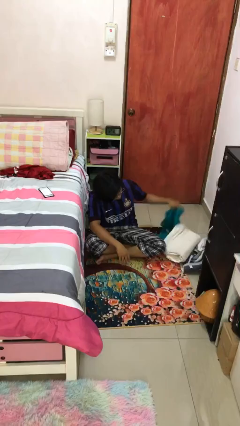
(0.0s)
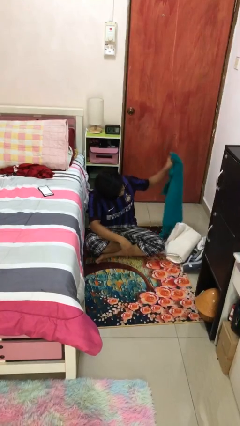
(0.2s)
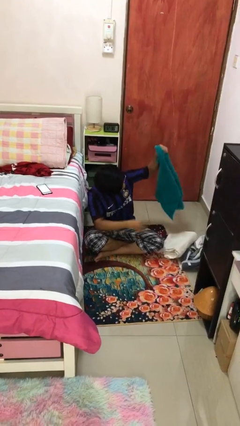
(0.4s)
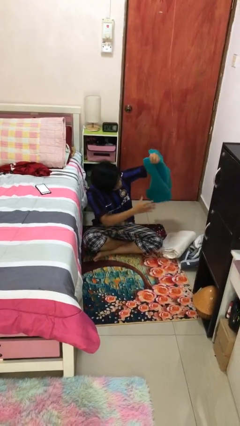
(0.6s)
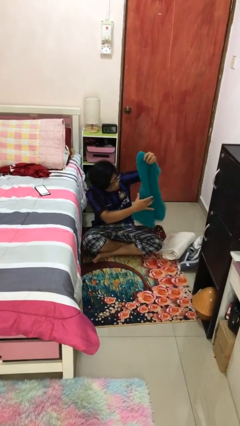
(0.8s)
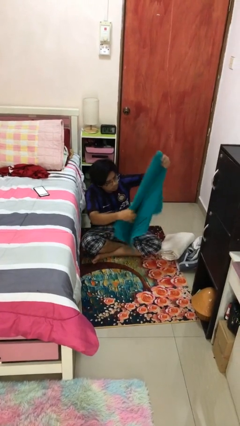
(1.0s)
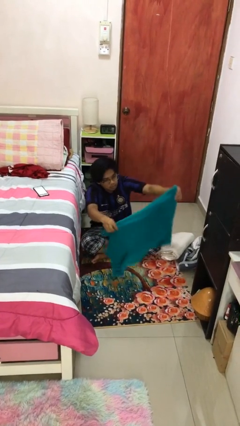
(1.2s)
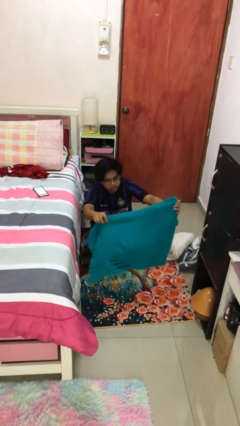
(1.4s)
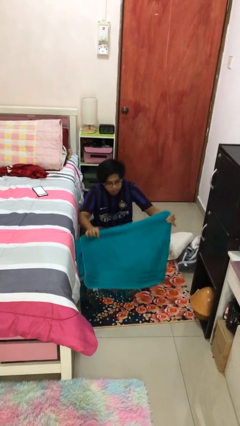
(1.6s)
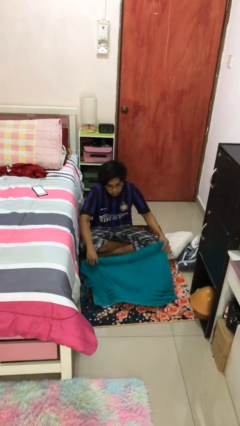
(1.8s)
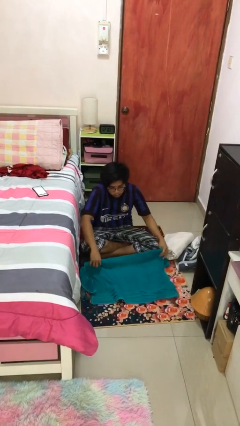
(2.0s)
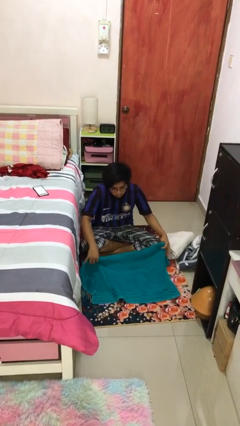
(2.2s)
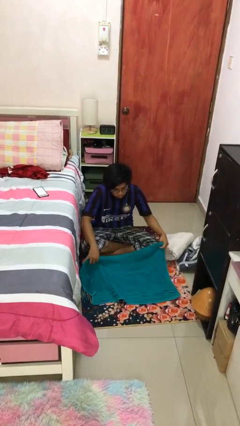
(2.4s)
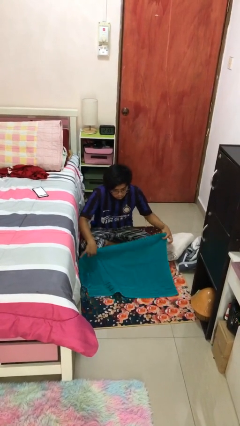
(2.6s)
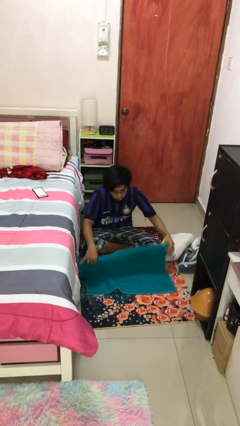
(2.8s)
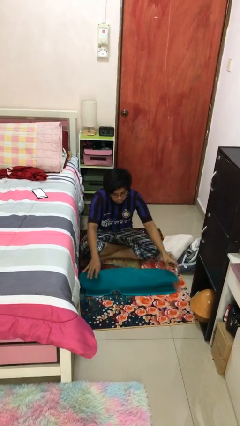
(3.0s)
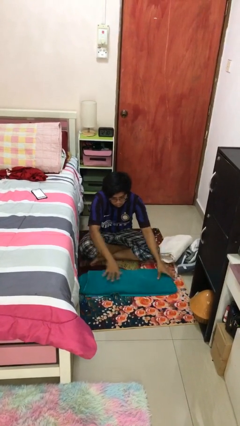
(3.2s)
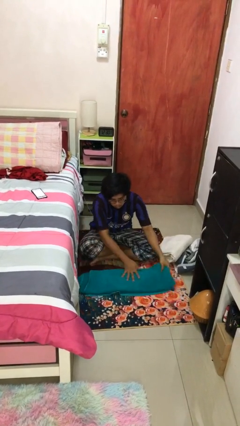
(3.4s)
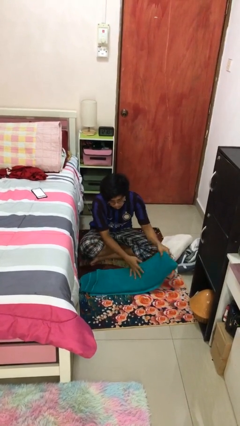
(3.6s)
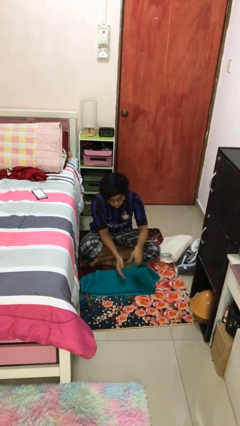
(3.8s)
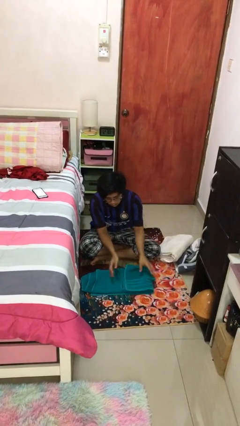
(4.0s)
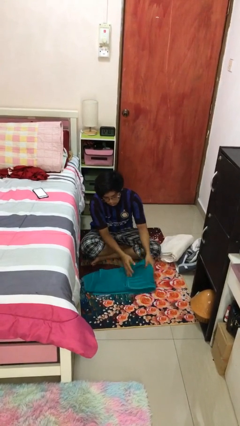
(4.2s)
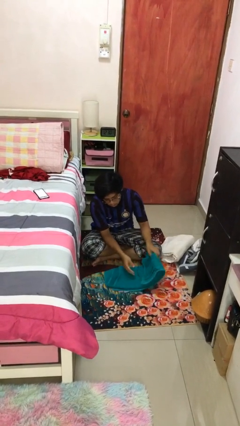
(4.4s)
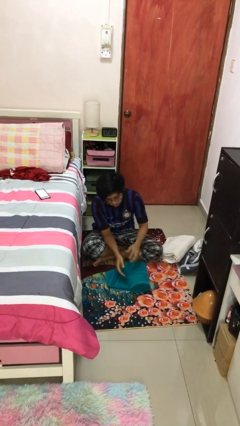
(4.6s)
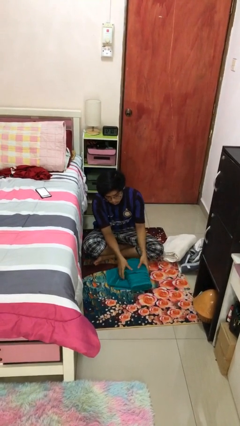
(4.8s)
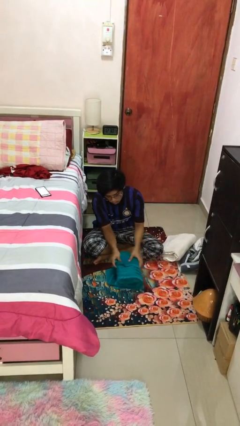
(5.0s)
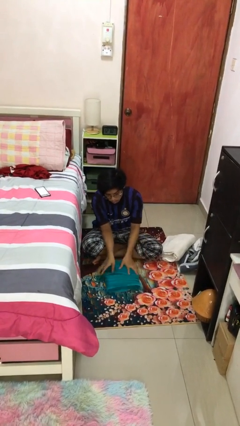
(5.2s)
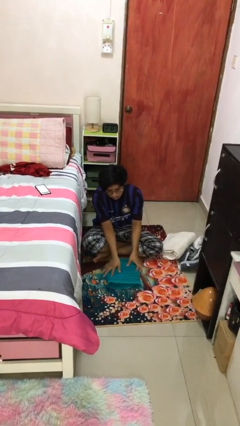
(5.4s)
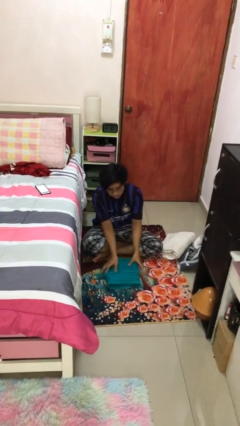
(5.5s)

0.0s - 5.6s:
person folds towel

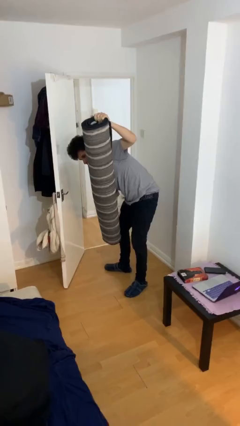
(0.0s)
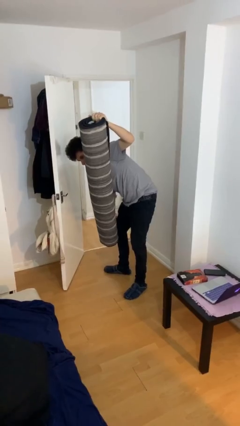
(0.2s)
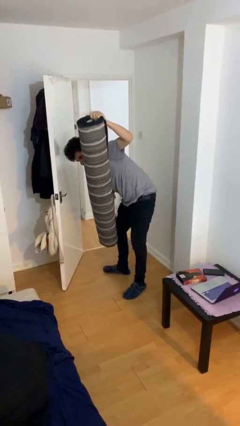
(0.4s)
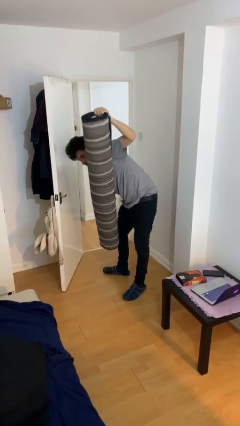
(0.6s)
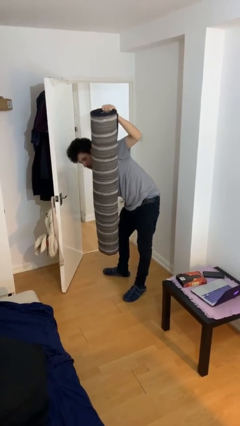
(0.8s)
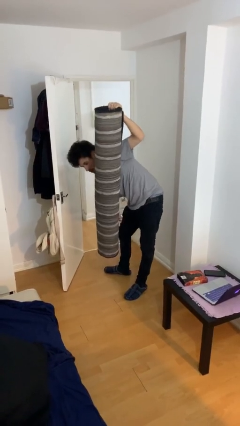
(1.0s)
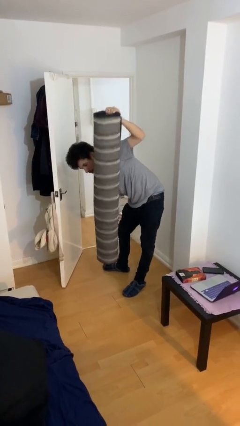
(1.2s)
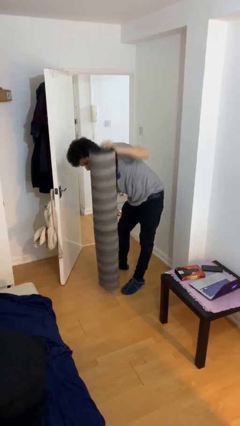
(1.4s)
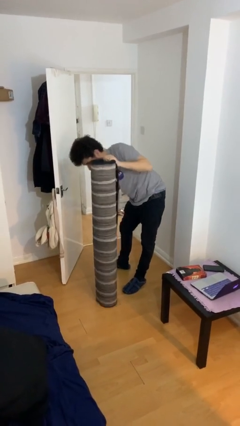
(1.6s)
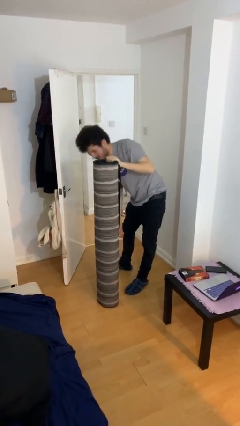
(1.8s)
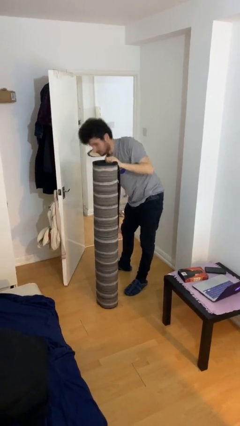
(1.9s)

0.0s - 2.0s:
person puts down object on floor

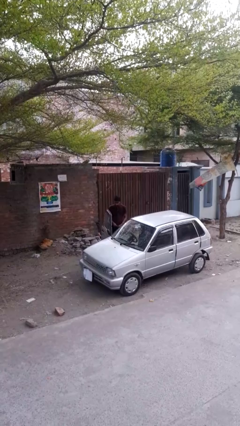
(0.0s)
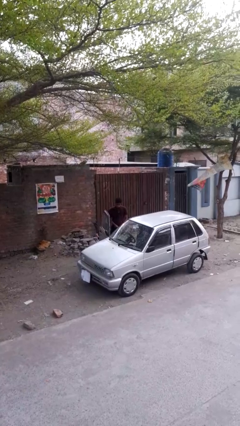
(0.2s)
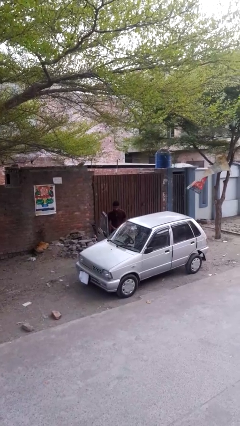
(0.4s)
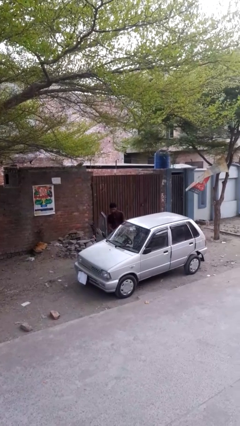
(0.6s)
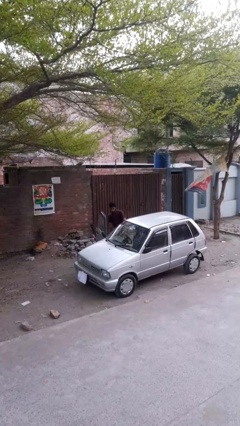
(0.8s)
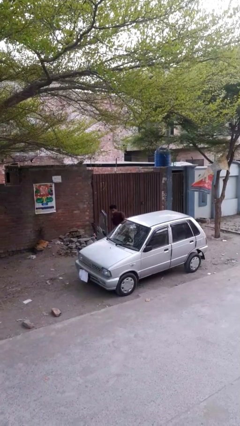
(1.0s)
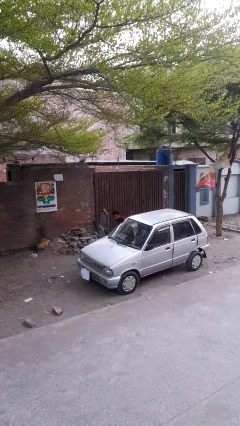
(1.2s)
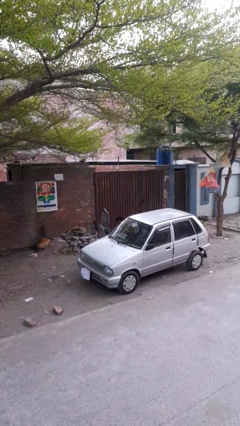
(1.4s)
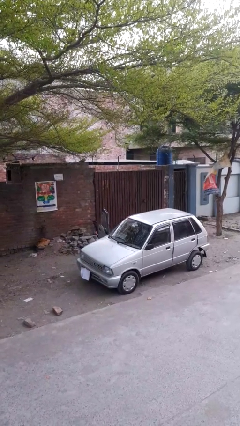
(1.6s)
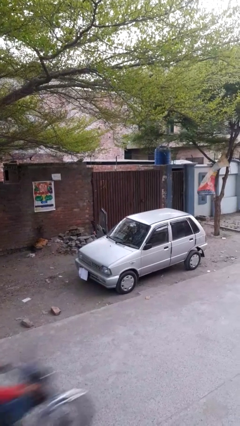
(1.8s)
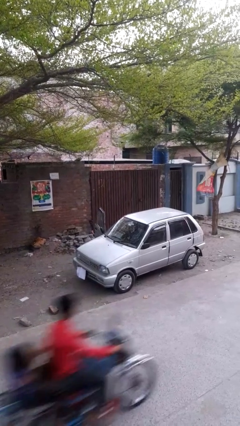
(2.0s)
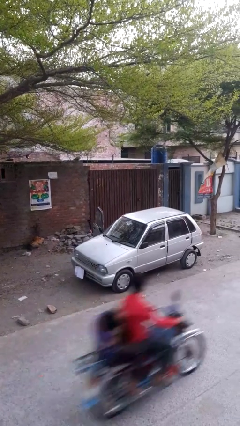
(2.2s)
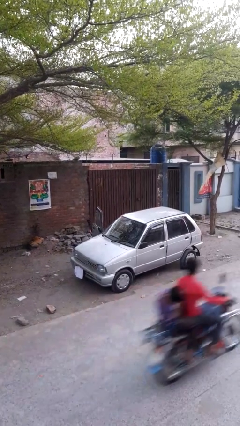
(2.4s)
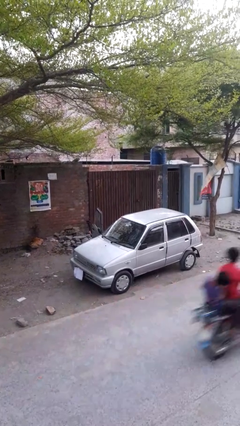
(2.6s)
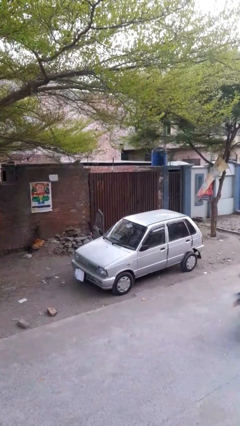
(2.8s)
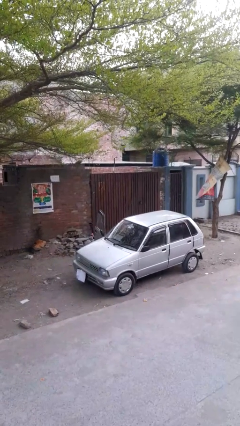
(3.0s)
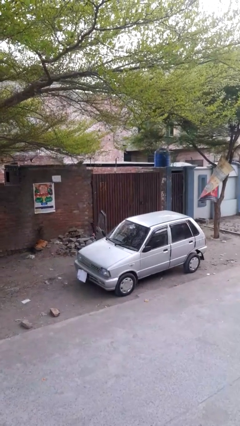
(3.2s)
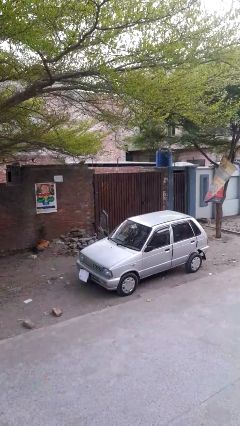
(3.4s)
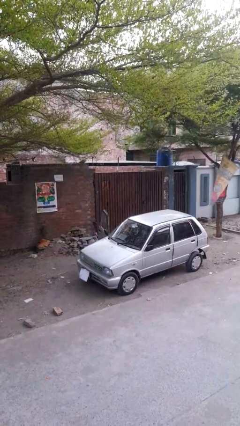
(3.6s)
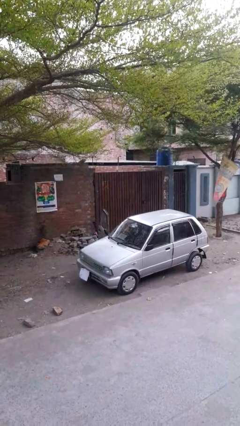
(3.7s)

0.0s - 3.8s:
person enters car

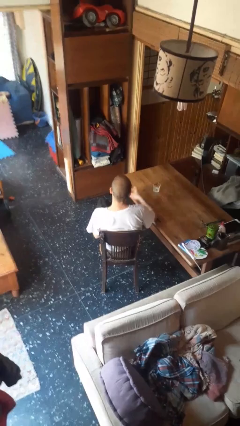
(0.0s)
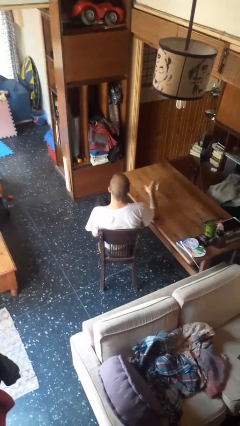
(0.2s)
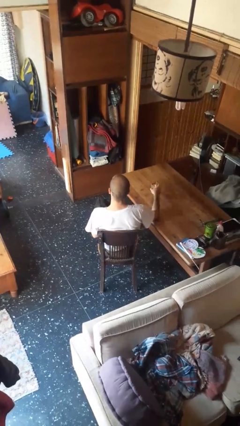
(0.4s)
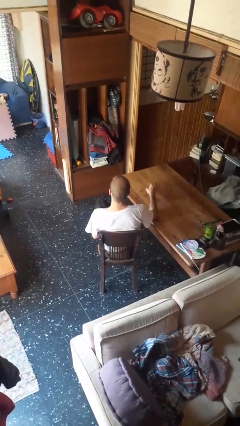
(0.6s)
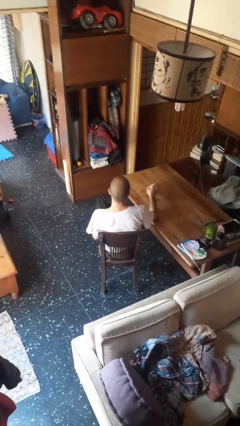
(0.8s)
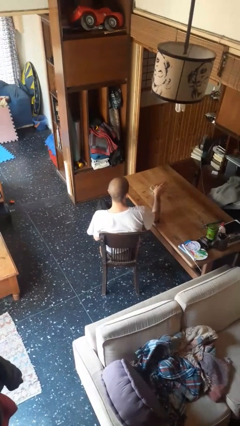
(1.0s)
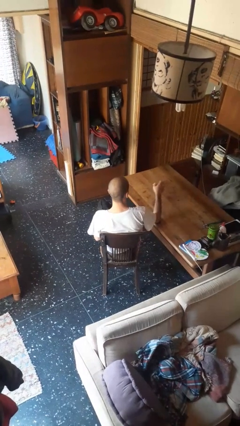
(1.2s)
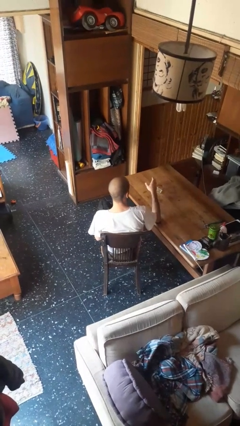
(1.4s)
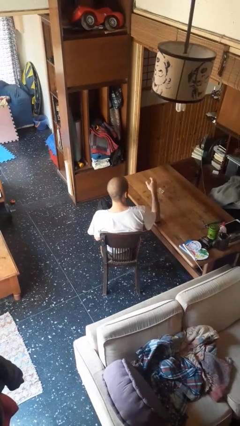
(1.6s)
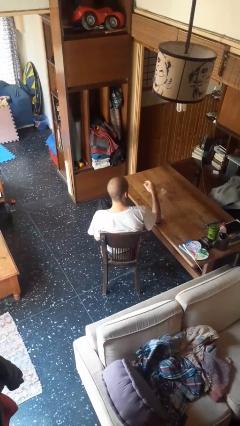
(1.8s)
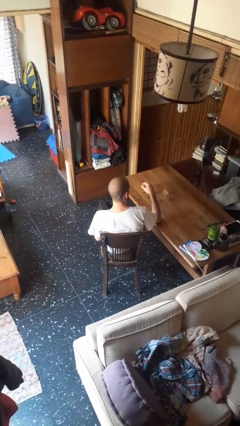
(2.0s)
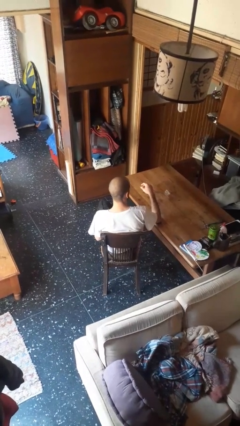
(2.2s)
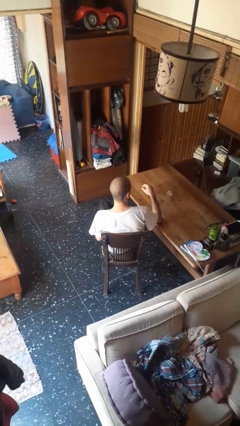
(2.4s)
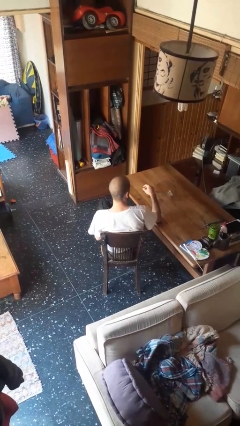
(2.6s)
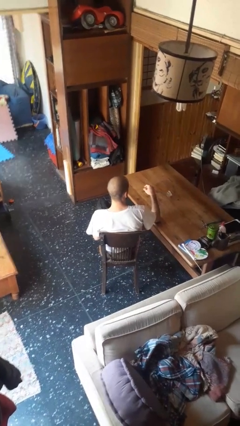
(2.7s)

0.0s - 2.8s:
person knocks over glass

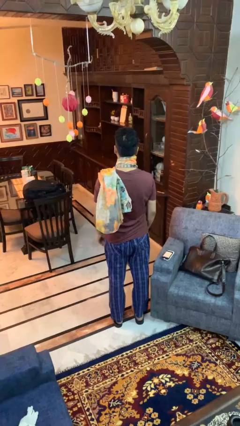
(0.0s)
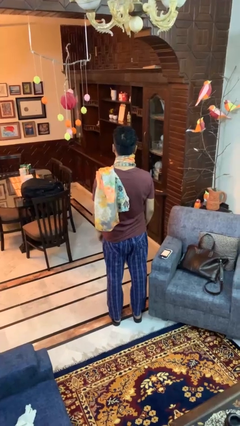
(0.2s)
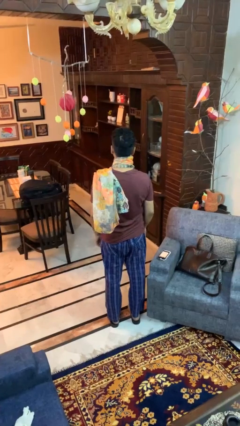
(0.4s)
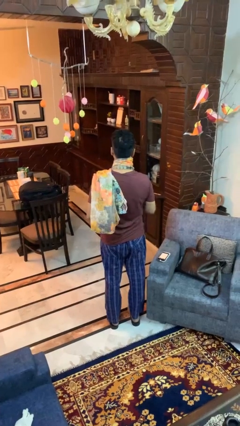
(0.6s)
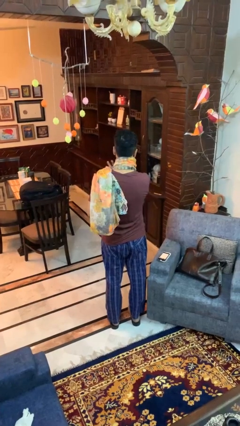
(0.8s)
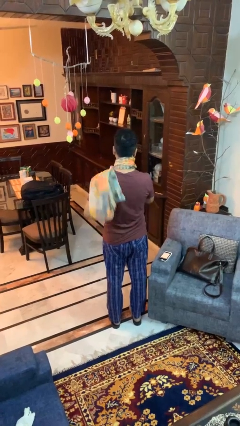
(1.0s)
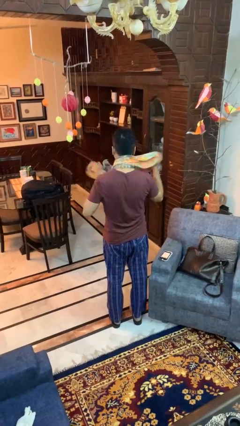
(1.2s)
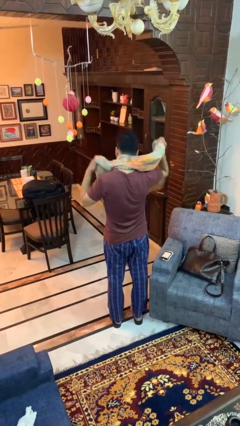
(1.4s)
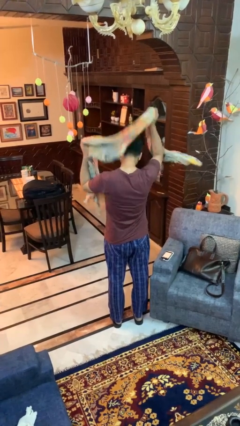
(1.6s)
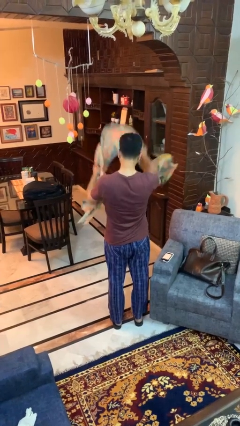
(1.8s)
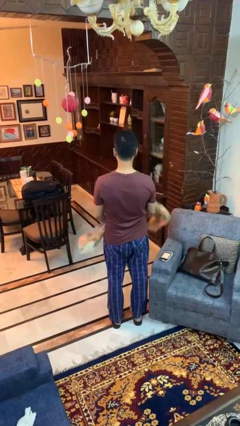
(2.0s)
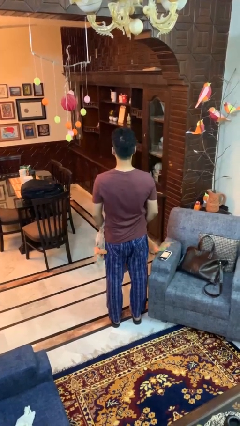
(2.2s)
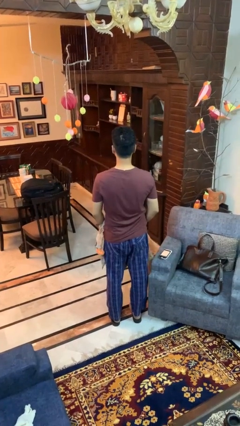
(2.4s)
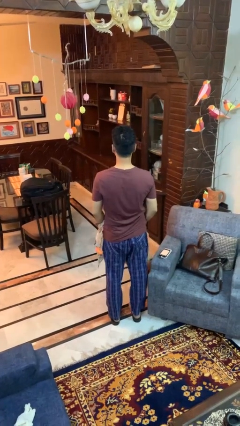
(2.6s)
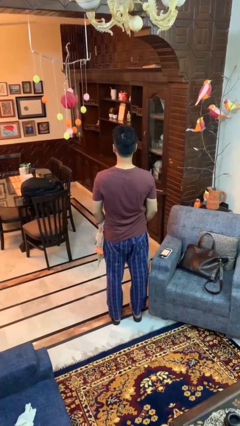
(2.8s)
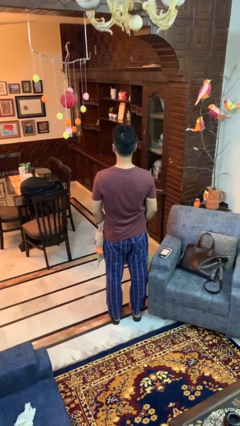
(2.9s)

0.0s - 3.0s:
person takes off scarf

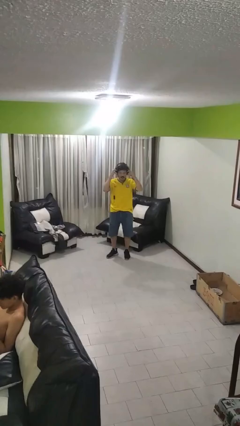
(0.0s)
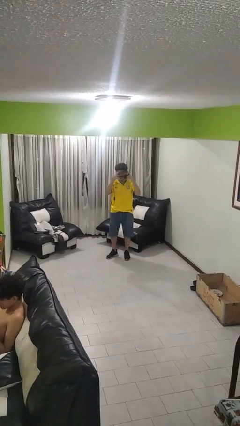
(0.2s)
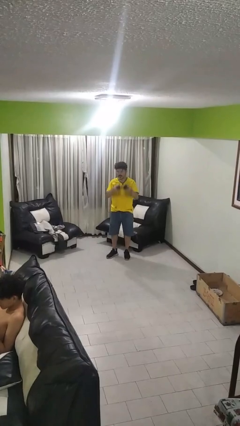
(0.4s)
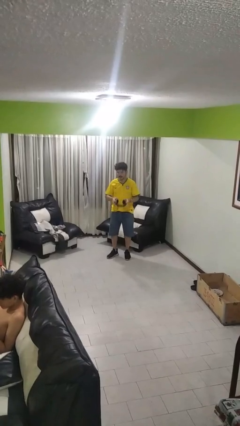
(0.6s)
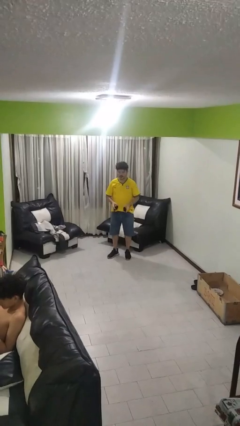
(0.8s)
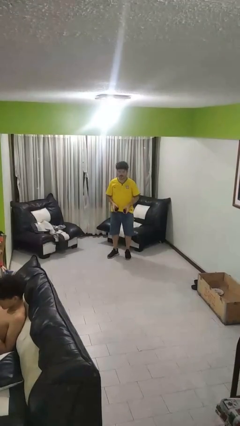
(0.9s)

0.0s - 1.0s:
person takes off headphones
